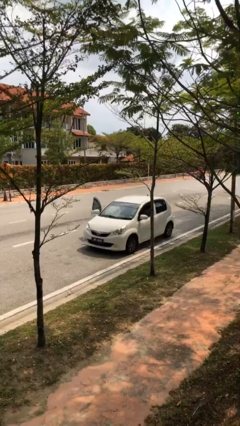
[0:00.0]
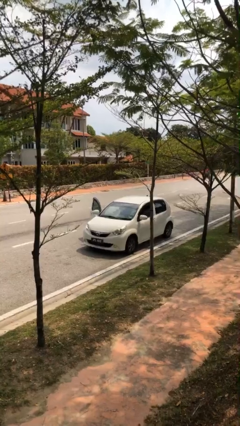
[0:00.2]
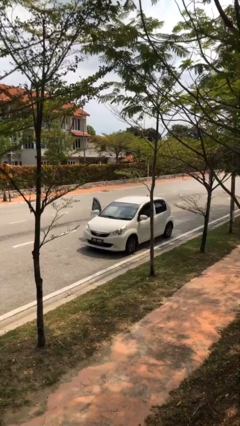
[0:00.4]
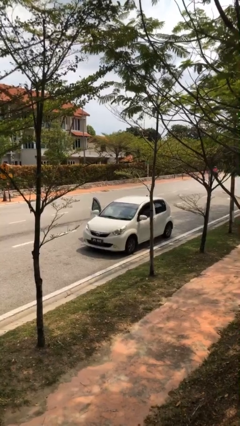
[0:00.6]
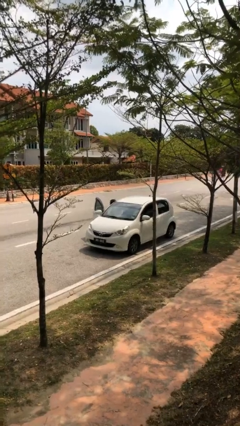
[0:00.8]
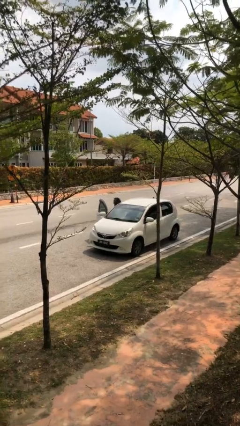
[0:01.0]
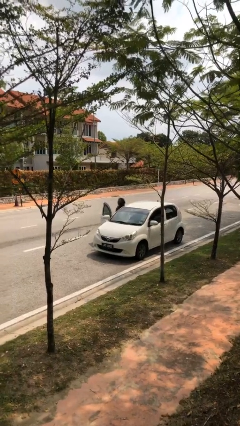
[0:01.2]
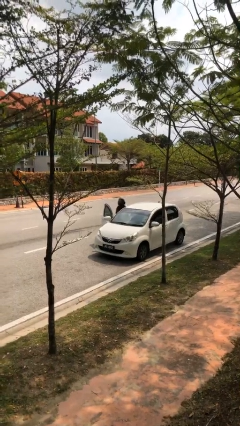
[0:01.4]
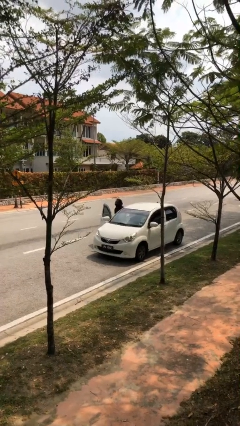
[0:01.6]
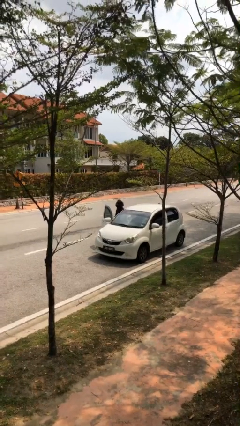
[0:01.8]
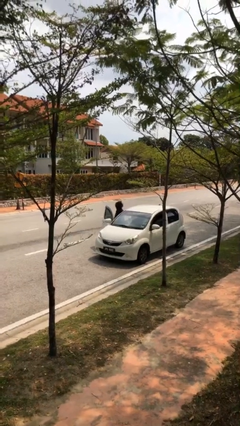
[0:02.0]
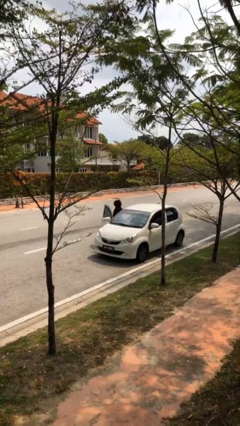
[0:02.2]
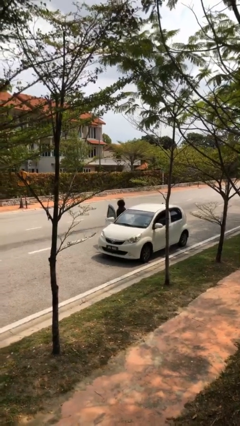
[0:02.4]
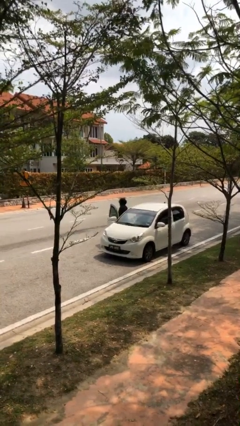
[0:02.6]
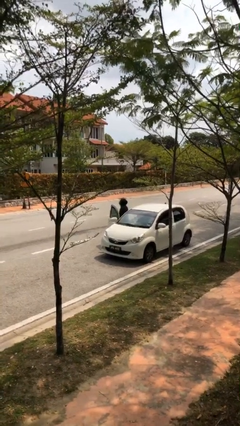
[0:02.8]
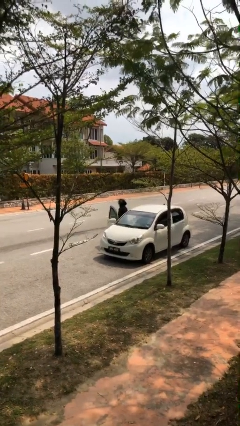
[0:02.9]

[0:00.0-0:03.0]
person exits car

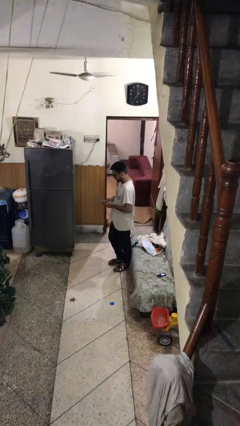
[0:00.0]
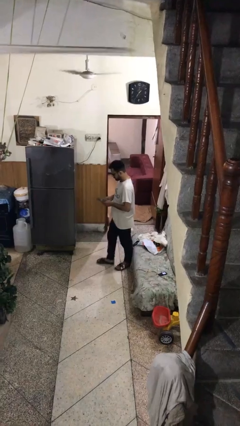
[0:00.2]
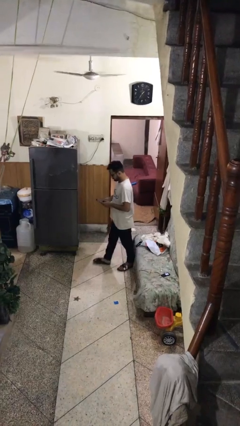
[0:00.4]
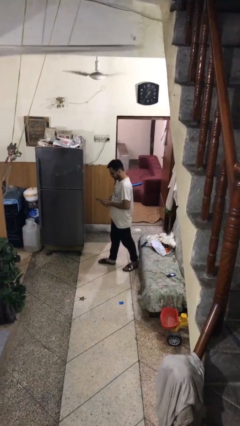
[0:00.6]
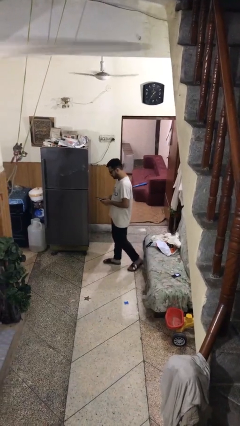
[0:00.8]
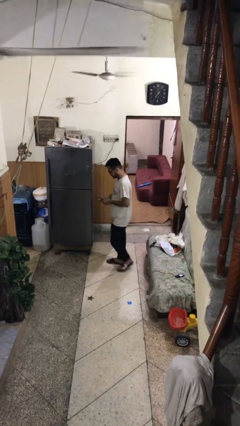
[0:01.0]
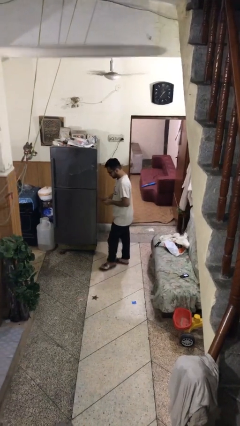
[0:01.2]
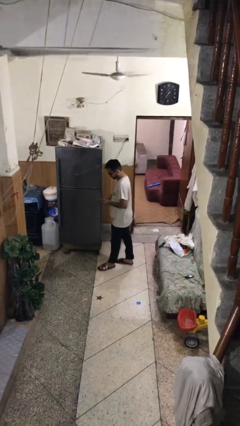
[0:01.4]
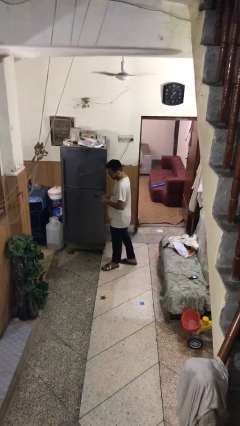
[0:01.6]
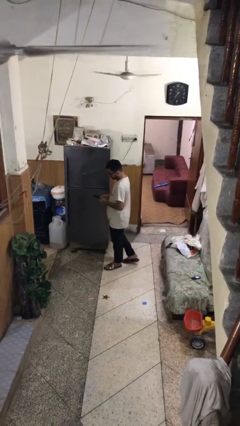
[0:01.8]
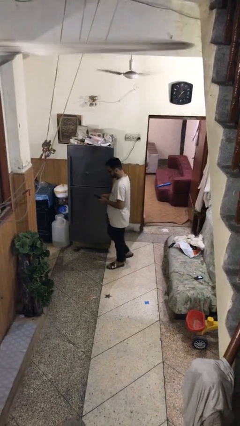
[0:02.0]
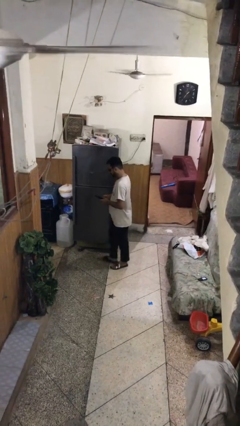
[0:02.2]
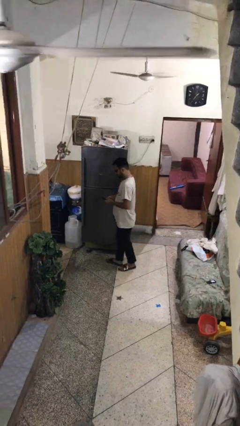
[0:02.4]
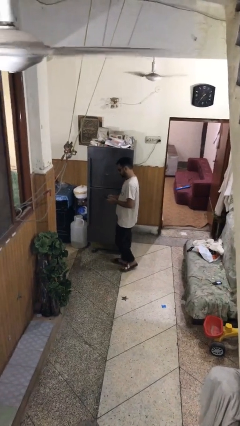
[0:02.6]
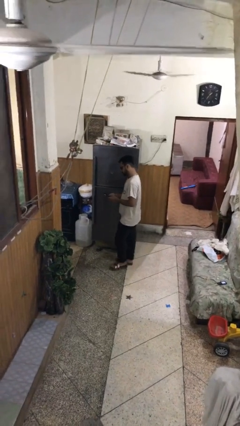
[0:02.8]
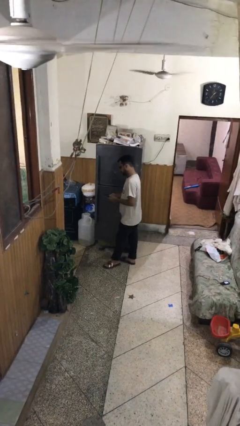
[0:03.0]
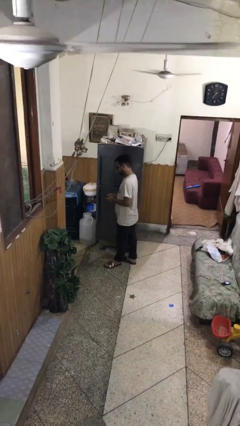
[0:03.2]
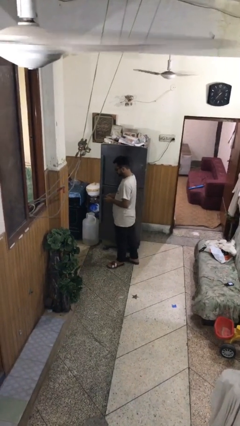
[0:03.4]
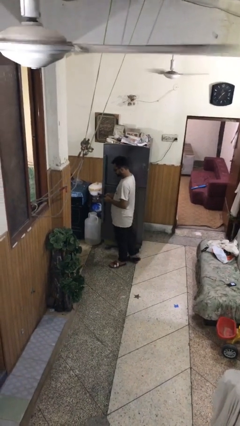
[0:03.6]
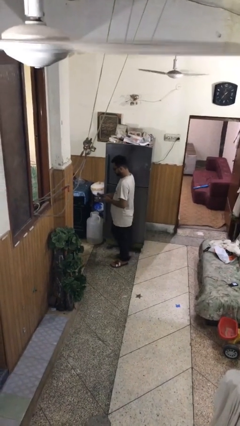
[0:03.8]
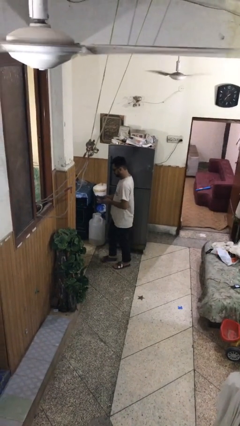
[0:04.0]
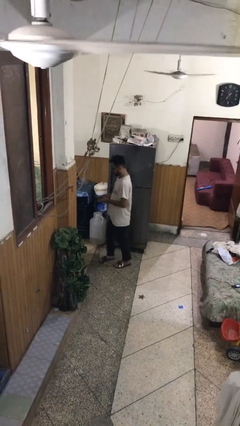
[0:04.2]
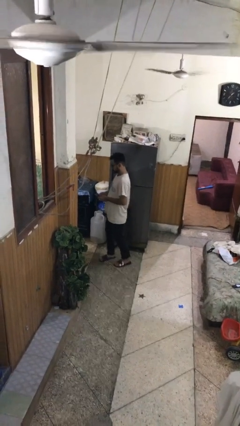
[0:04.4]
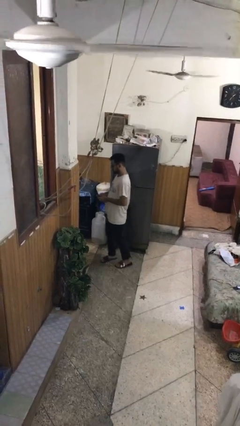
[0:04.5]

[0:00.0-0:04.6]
person texts on phone

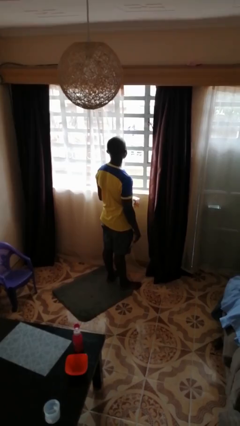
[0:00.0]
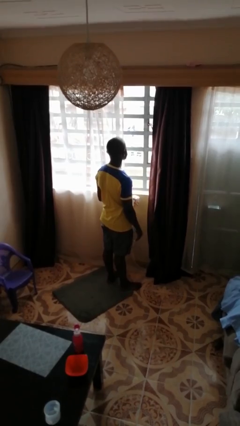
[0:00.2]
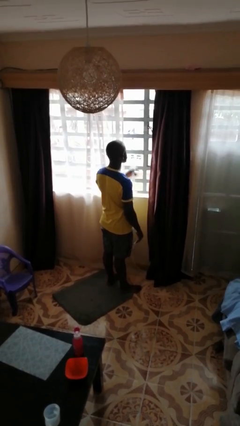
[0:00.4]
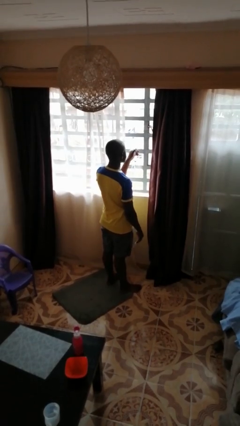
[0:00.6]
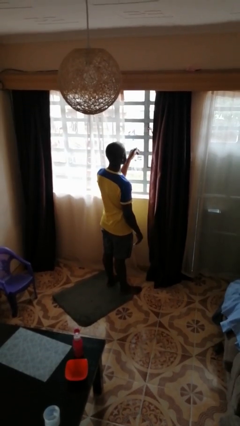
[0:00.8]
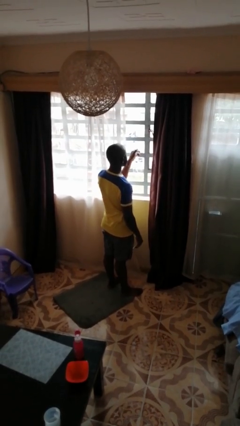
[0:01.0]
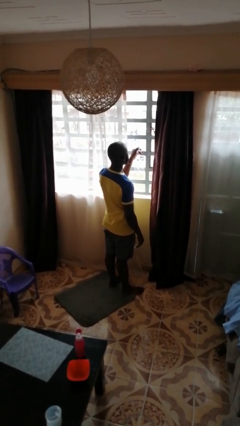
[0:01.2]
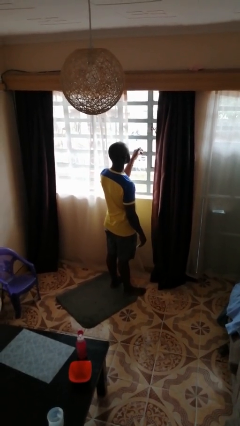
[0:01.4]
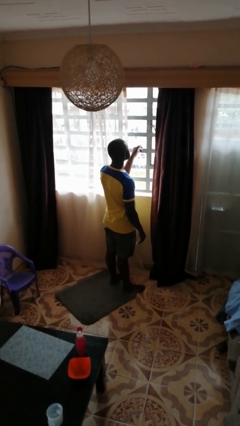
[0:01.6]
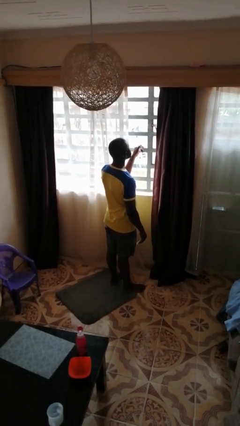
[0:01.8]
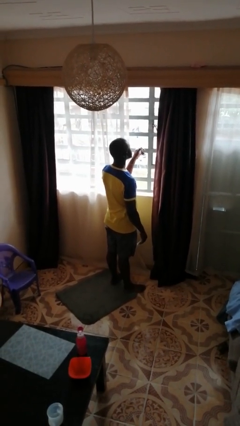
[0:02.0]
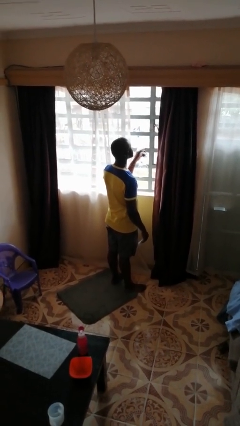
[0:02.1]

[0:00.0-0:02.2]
person sprays from bottle

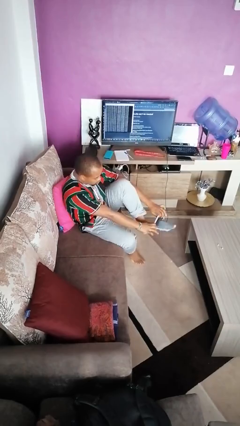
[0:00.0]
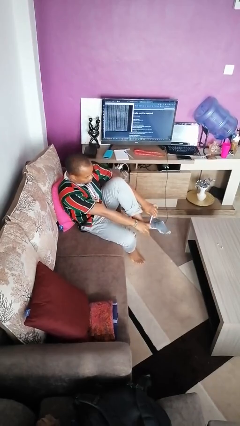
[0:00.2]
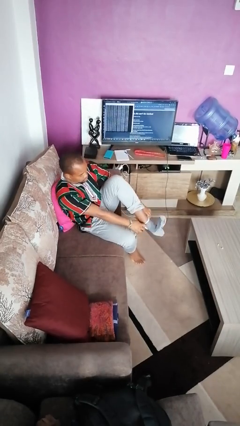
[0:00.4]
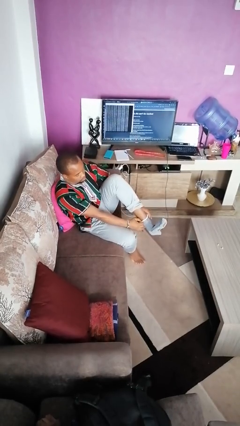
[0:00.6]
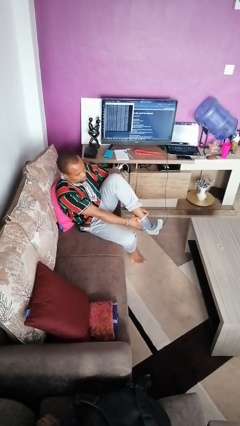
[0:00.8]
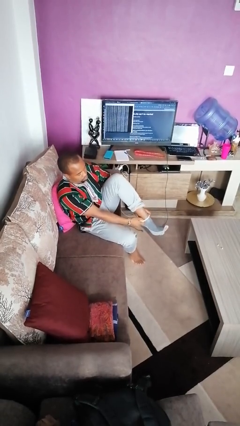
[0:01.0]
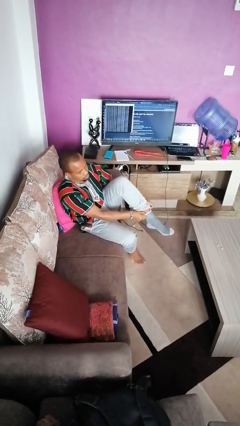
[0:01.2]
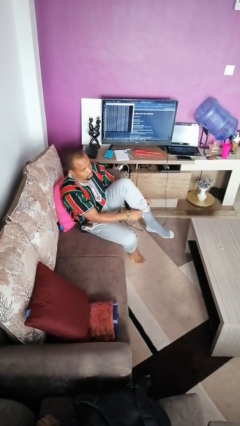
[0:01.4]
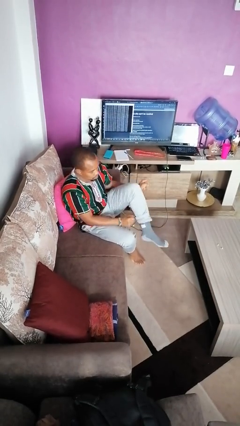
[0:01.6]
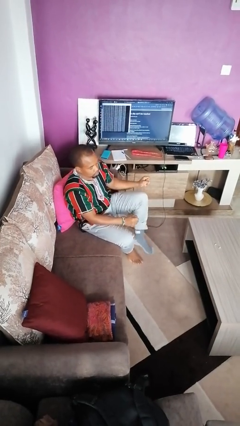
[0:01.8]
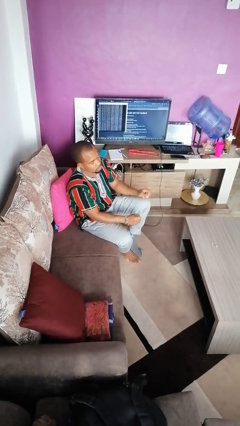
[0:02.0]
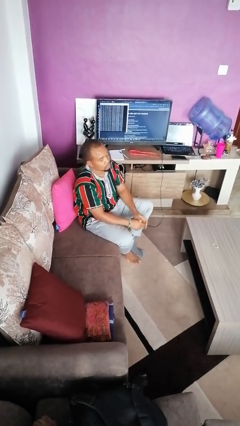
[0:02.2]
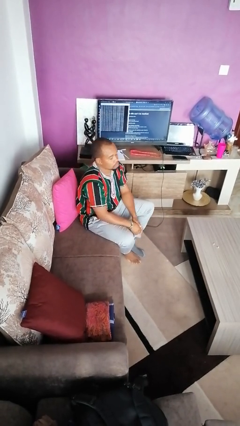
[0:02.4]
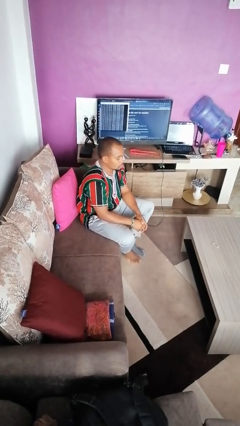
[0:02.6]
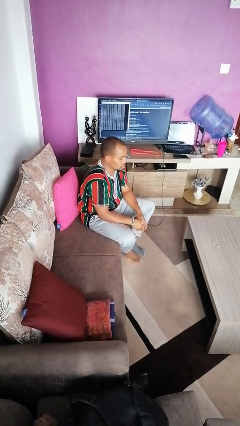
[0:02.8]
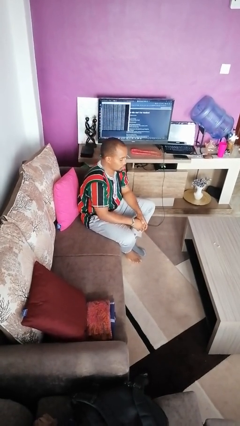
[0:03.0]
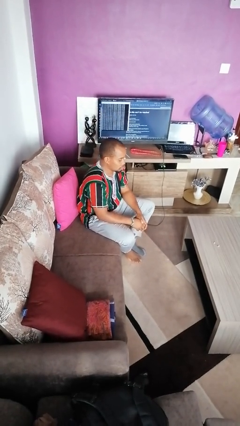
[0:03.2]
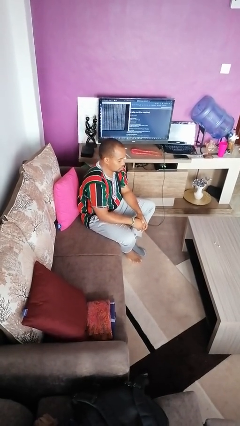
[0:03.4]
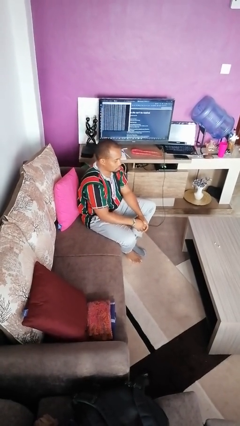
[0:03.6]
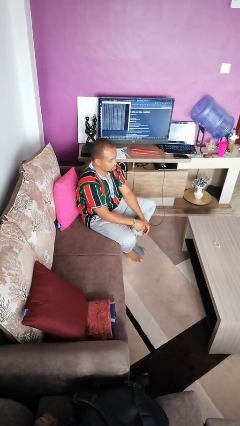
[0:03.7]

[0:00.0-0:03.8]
person puts on socks

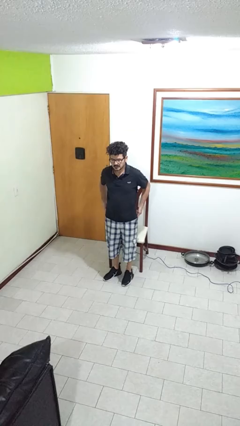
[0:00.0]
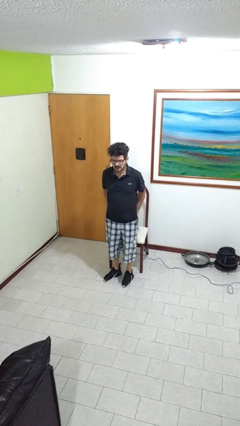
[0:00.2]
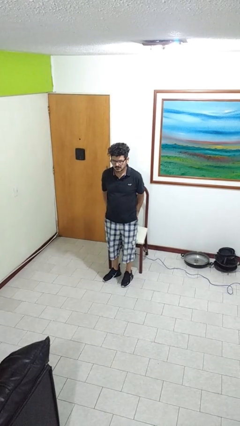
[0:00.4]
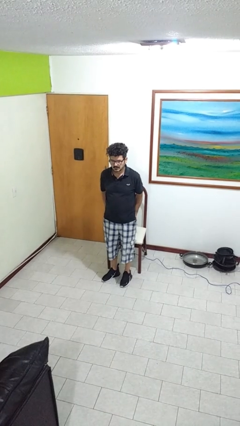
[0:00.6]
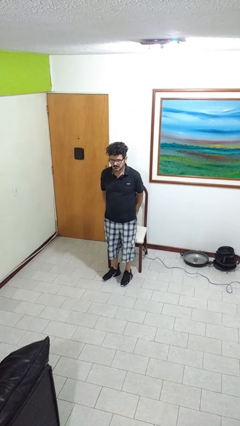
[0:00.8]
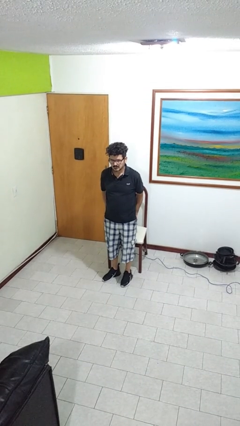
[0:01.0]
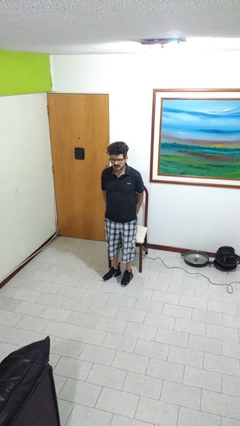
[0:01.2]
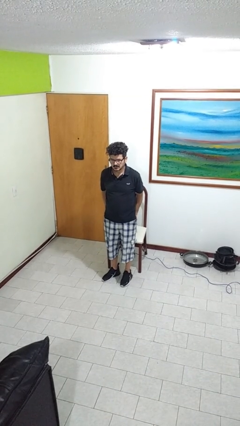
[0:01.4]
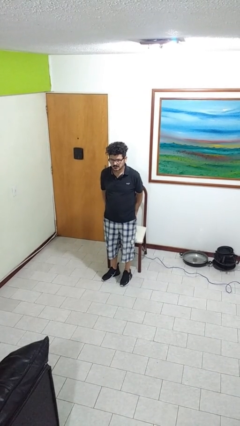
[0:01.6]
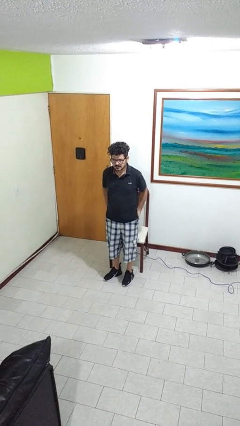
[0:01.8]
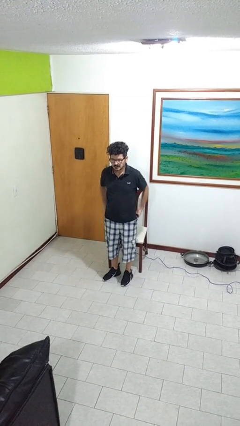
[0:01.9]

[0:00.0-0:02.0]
person puts hands in back pockets

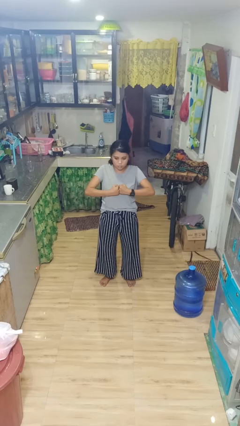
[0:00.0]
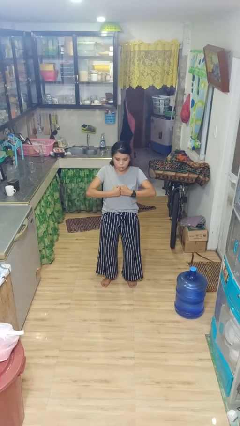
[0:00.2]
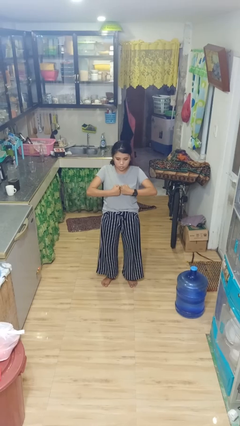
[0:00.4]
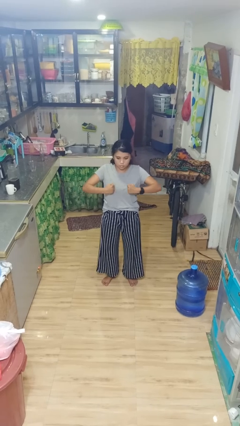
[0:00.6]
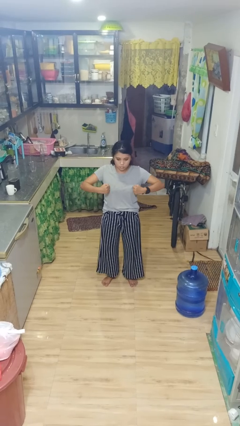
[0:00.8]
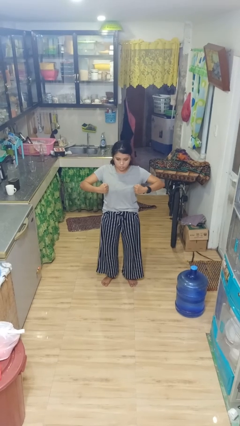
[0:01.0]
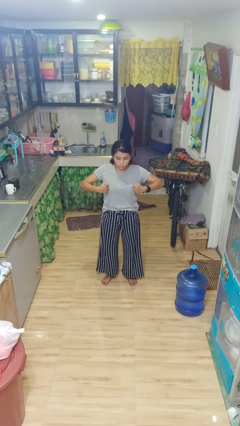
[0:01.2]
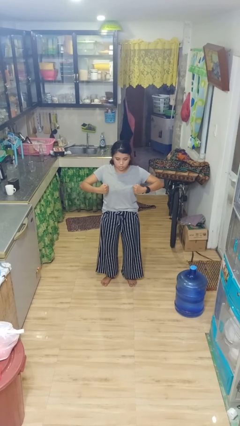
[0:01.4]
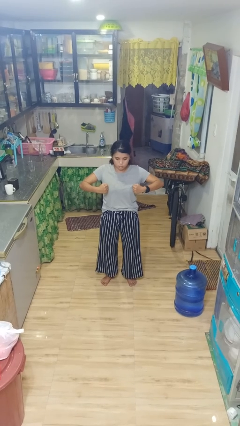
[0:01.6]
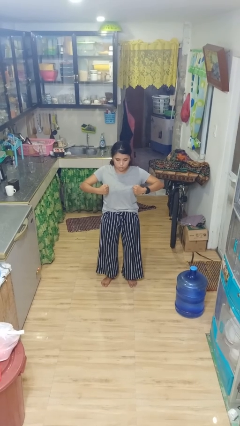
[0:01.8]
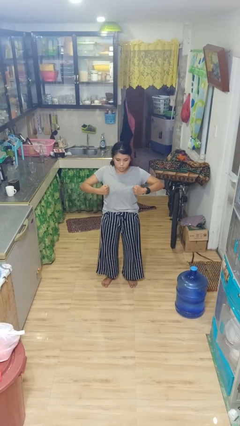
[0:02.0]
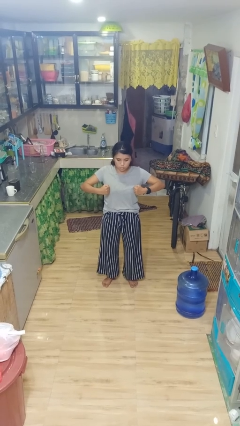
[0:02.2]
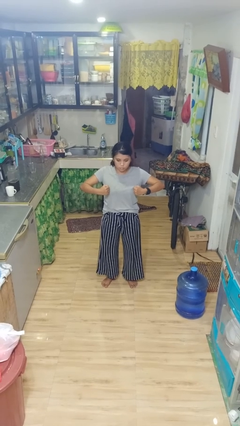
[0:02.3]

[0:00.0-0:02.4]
person gestures zoom in
